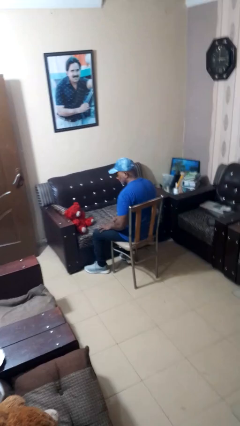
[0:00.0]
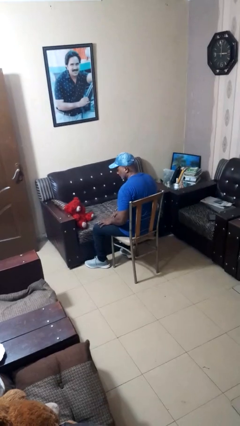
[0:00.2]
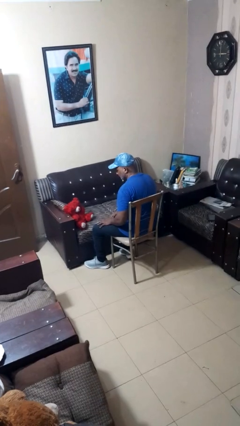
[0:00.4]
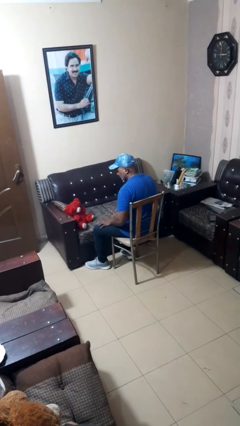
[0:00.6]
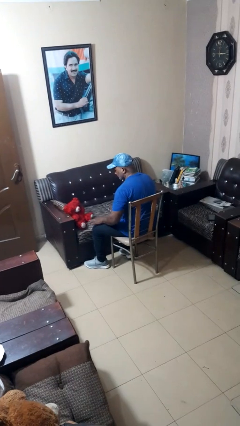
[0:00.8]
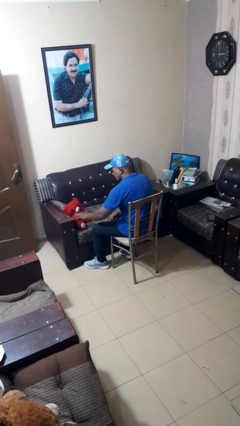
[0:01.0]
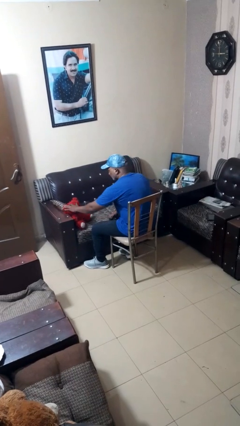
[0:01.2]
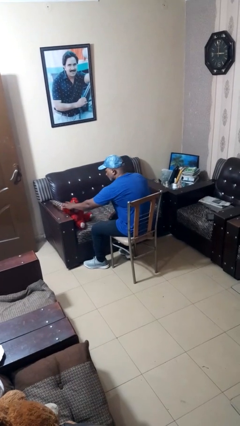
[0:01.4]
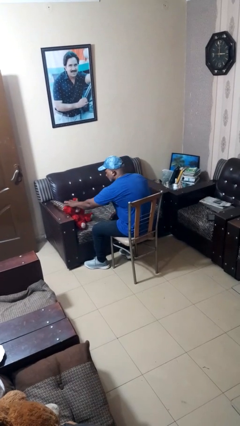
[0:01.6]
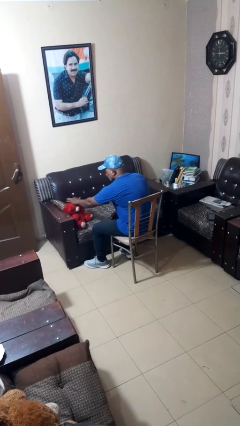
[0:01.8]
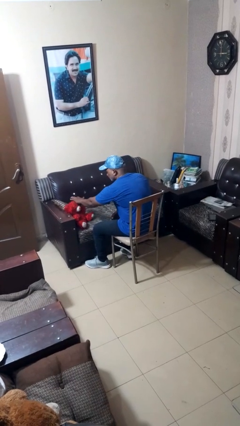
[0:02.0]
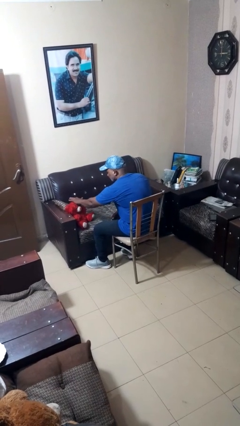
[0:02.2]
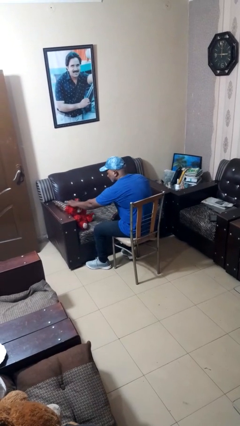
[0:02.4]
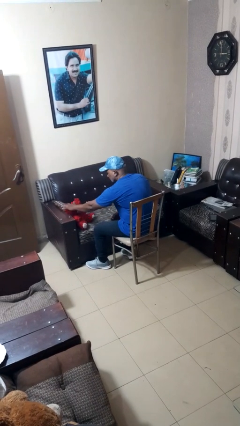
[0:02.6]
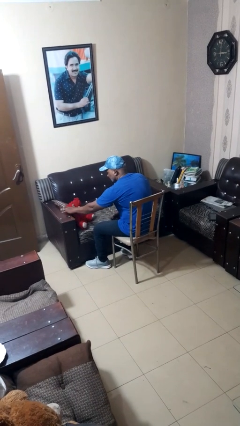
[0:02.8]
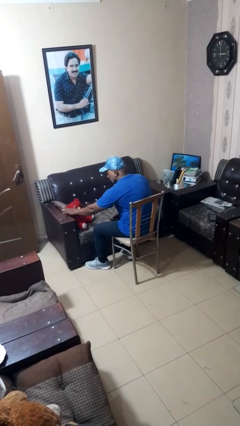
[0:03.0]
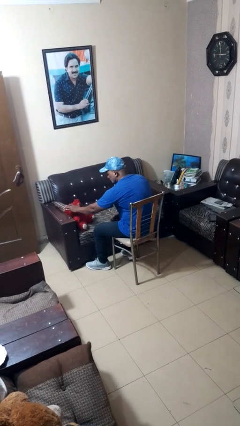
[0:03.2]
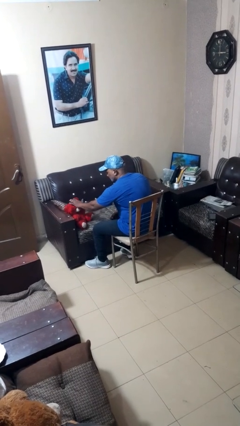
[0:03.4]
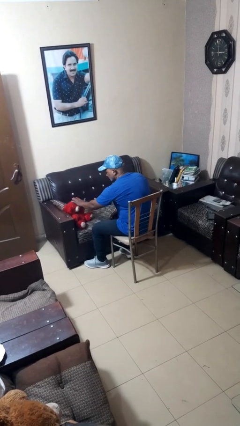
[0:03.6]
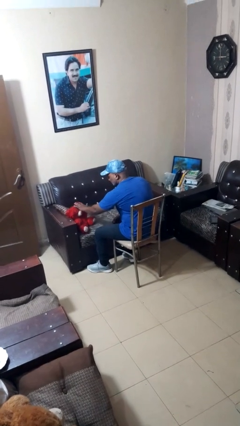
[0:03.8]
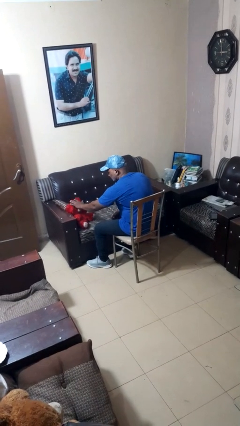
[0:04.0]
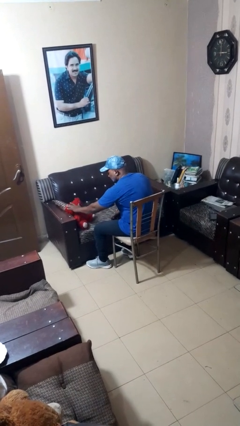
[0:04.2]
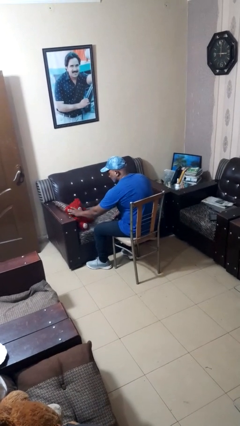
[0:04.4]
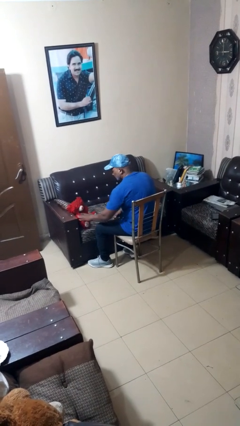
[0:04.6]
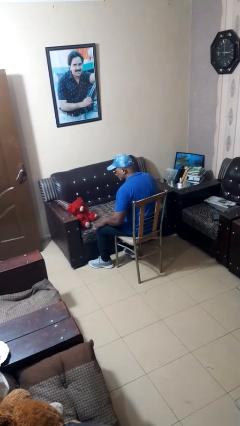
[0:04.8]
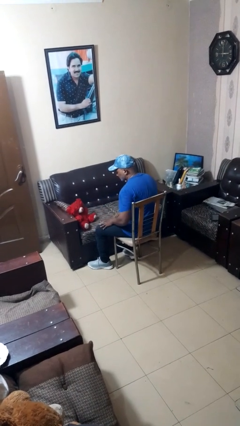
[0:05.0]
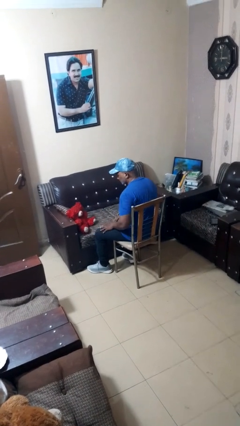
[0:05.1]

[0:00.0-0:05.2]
person waves hand over object

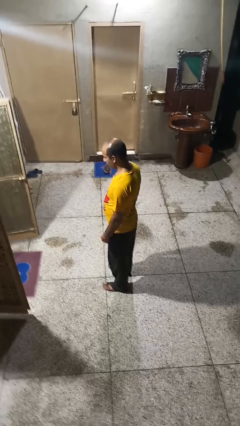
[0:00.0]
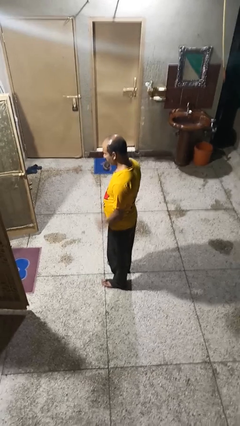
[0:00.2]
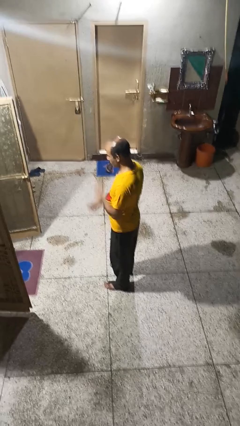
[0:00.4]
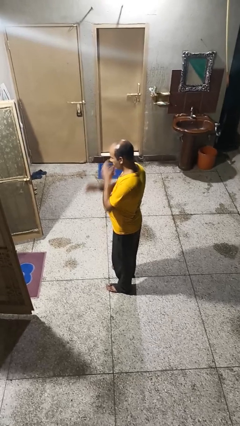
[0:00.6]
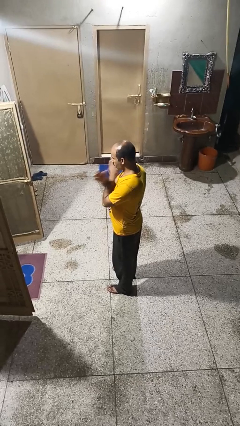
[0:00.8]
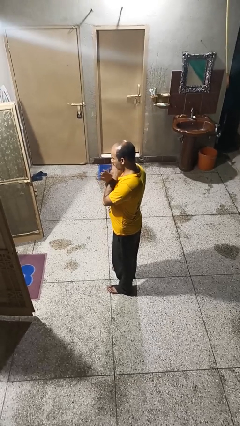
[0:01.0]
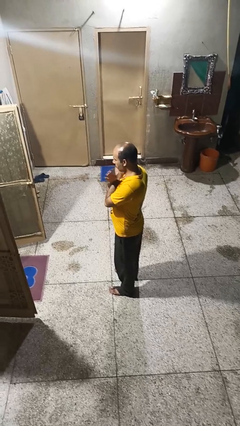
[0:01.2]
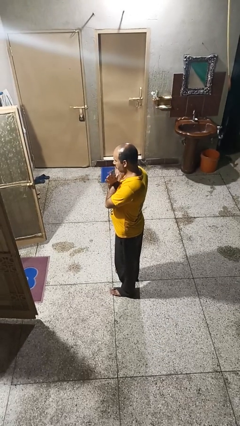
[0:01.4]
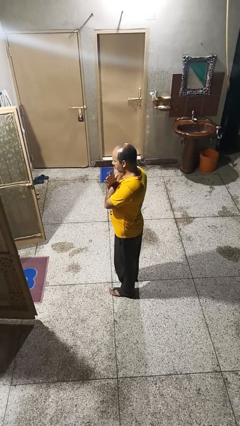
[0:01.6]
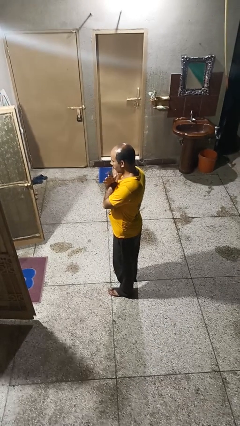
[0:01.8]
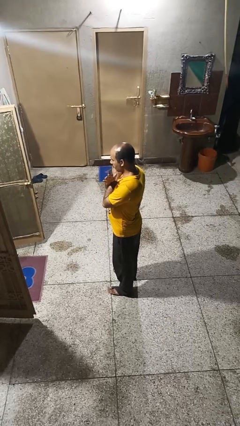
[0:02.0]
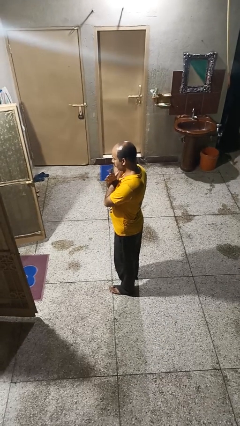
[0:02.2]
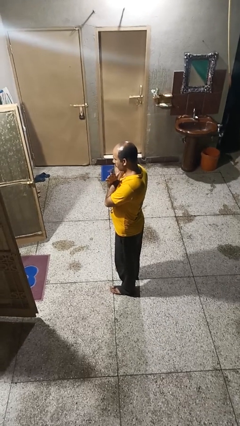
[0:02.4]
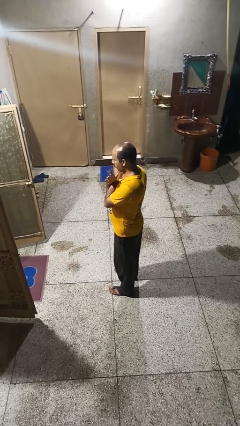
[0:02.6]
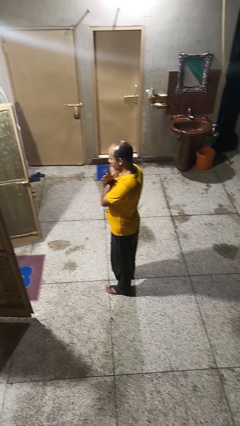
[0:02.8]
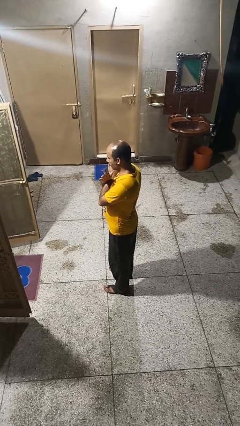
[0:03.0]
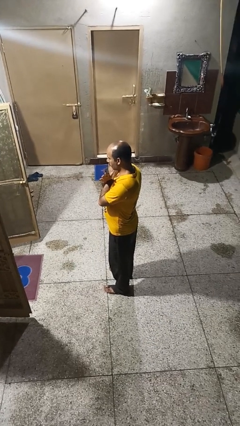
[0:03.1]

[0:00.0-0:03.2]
person gestures arms x

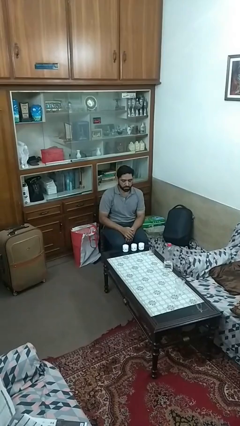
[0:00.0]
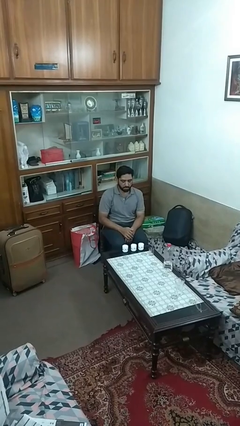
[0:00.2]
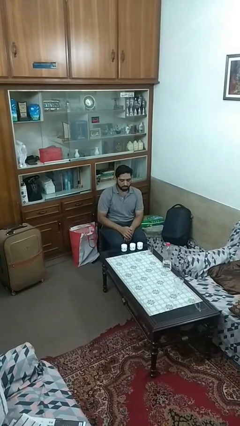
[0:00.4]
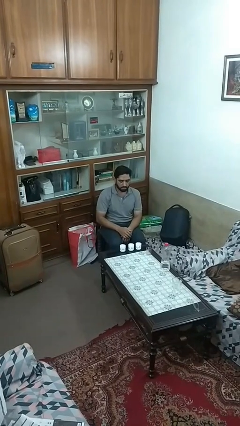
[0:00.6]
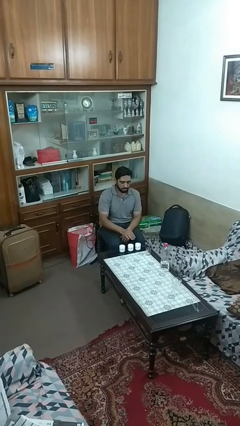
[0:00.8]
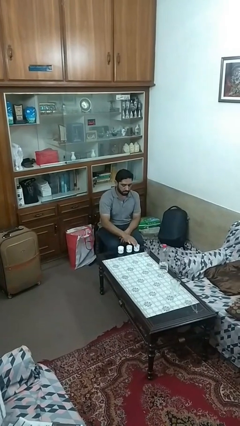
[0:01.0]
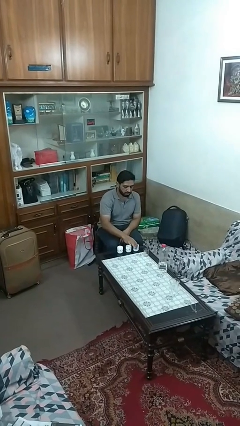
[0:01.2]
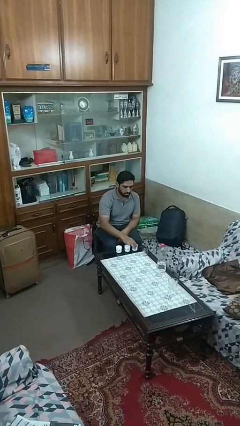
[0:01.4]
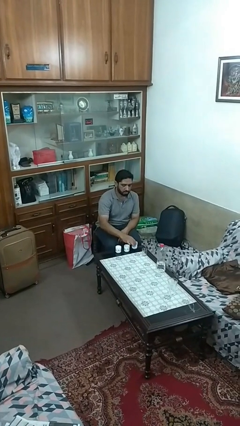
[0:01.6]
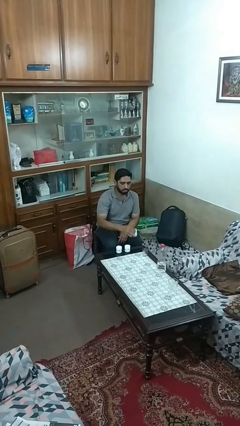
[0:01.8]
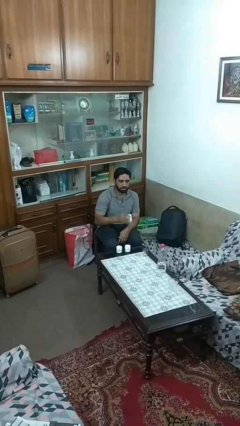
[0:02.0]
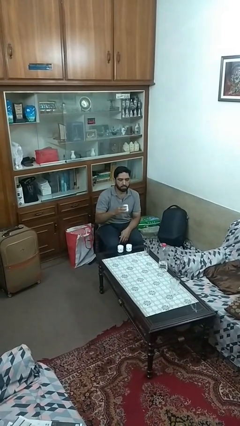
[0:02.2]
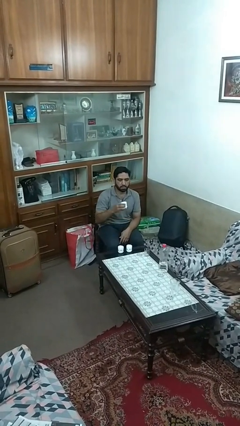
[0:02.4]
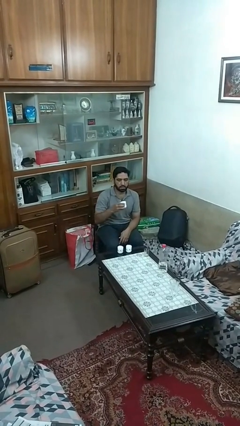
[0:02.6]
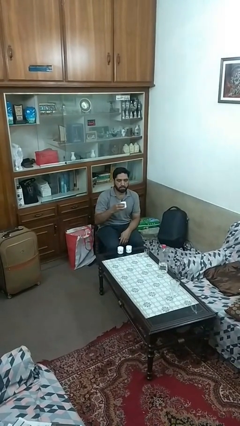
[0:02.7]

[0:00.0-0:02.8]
person picks up object from table

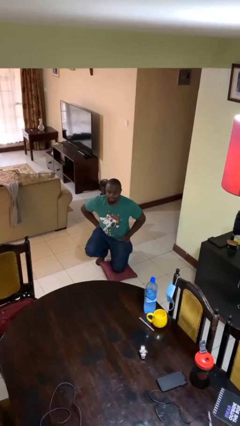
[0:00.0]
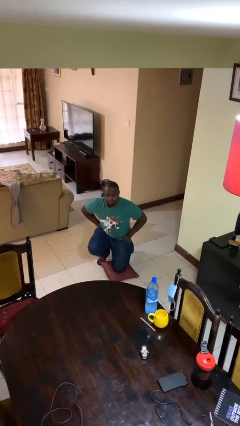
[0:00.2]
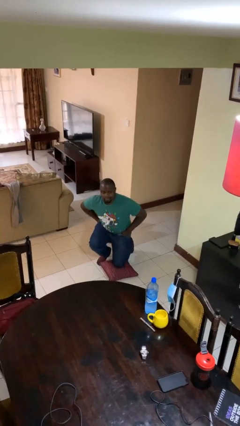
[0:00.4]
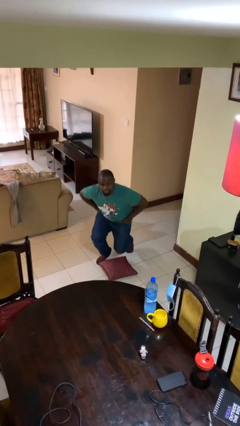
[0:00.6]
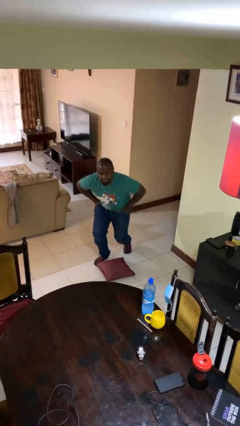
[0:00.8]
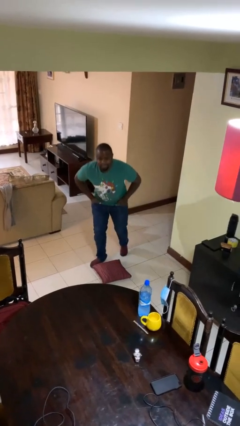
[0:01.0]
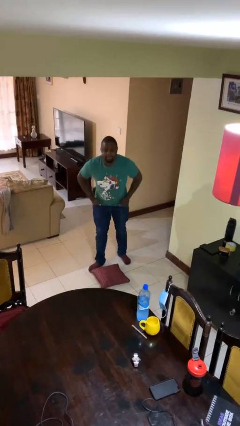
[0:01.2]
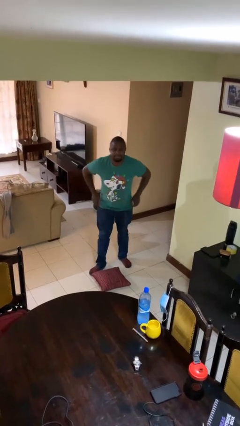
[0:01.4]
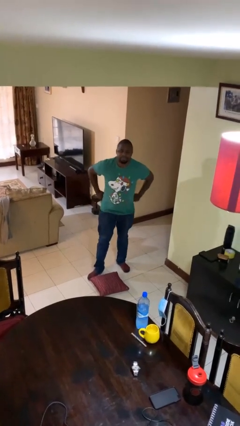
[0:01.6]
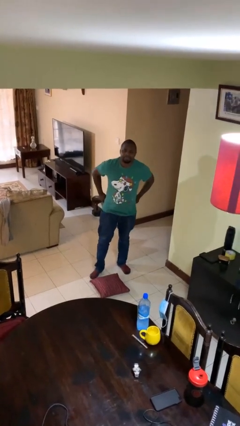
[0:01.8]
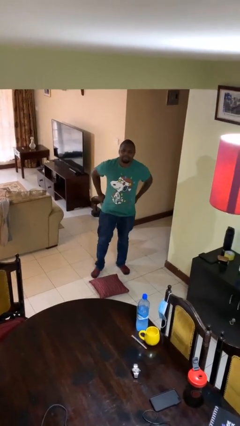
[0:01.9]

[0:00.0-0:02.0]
person stands up from floor

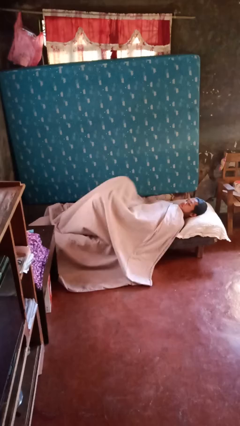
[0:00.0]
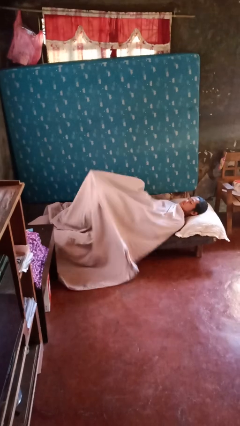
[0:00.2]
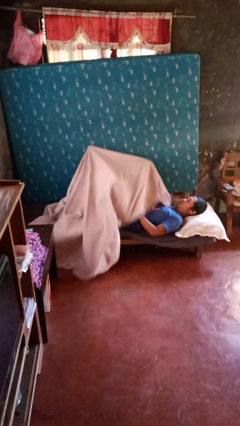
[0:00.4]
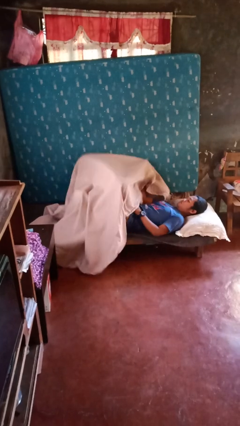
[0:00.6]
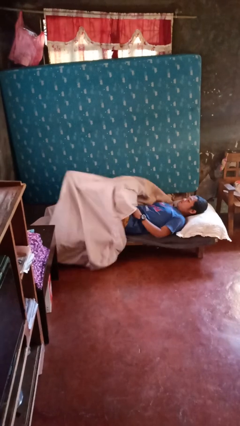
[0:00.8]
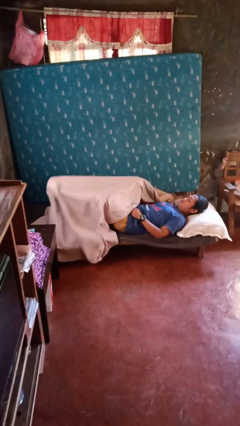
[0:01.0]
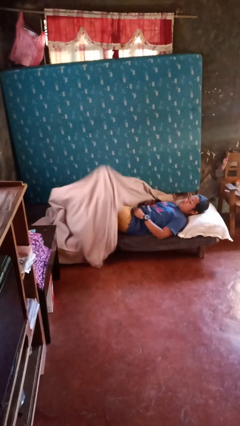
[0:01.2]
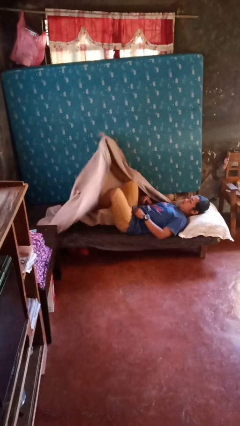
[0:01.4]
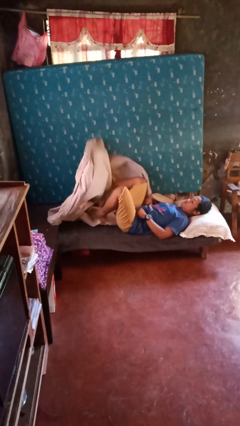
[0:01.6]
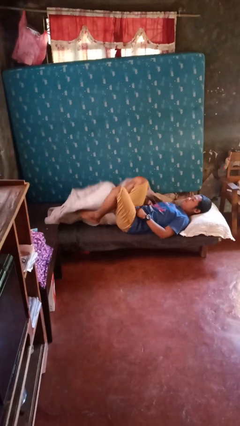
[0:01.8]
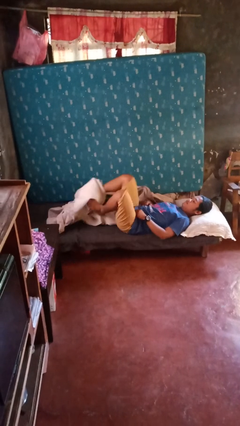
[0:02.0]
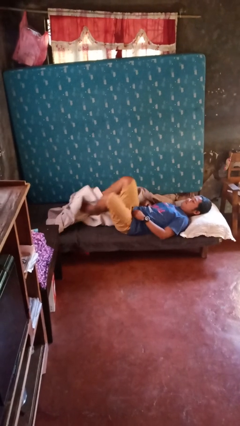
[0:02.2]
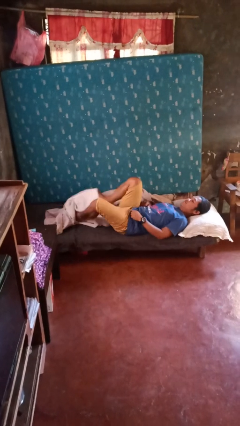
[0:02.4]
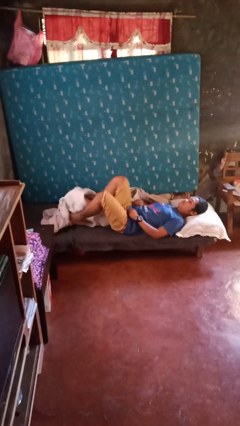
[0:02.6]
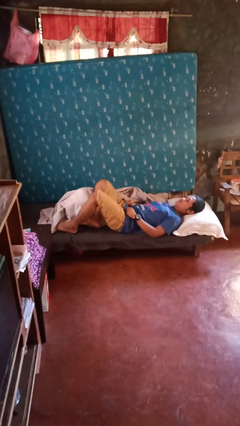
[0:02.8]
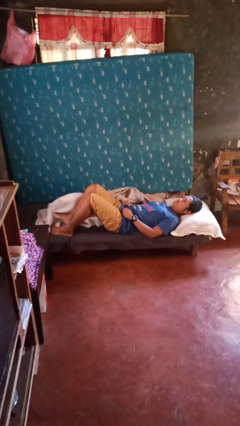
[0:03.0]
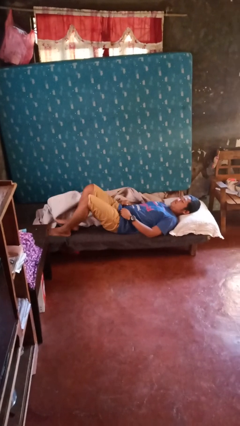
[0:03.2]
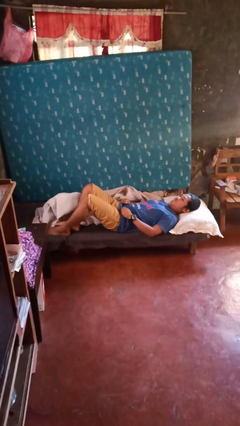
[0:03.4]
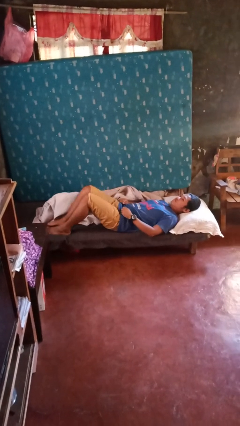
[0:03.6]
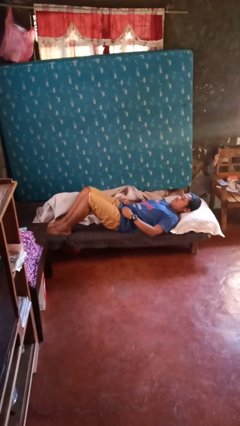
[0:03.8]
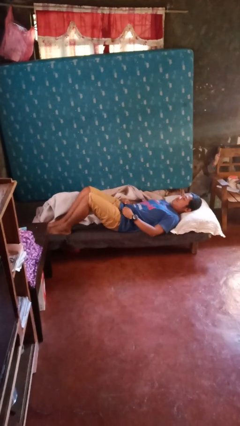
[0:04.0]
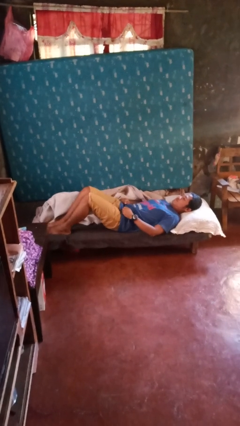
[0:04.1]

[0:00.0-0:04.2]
person uncovers with bedsheets

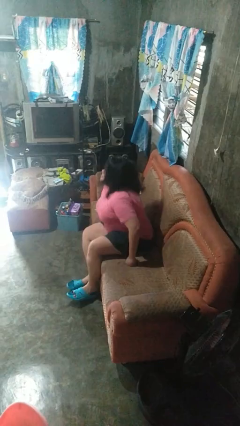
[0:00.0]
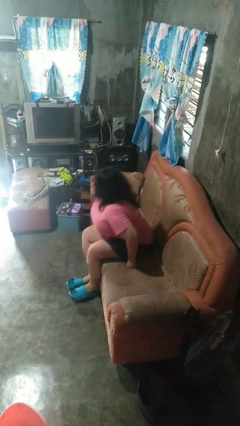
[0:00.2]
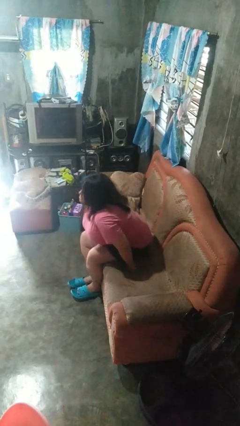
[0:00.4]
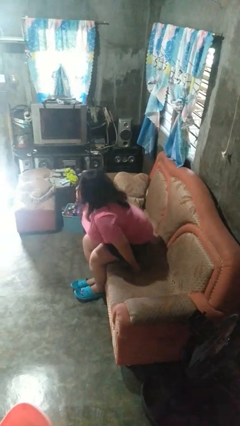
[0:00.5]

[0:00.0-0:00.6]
person stands up
